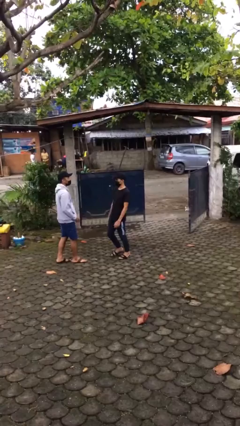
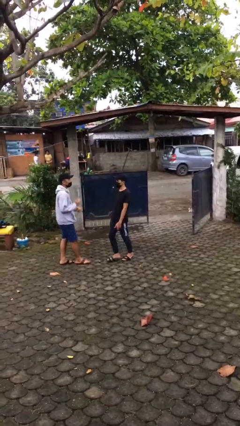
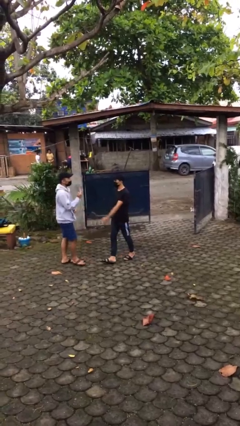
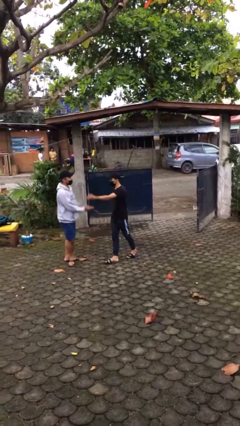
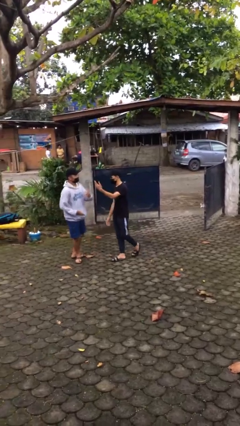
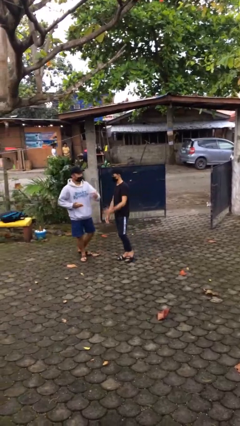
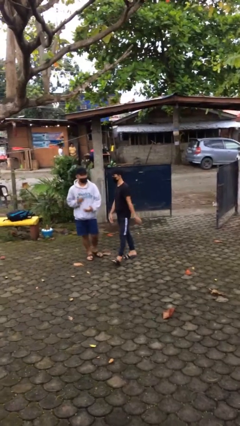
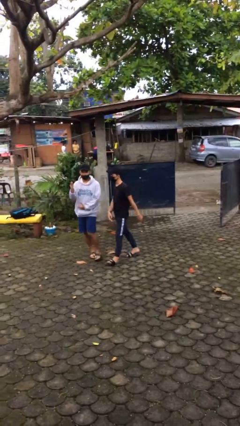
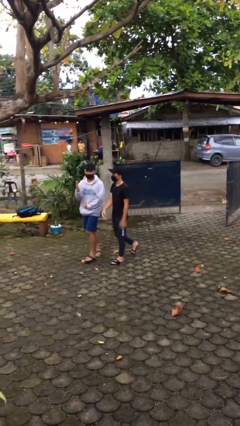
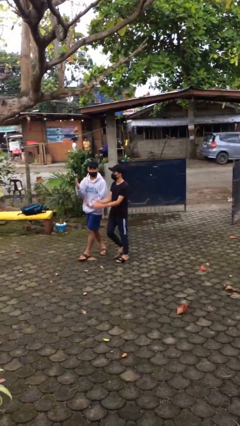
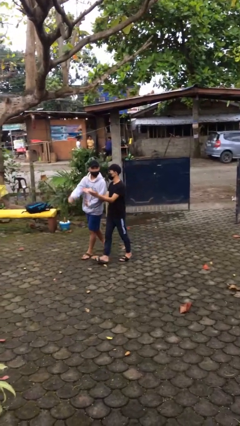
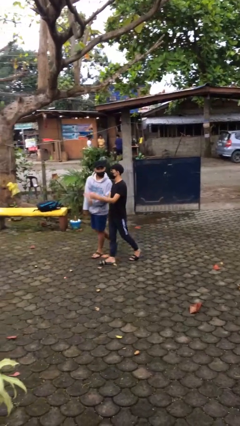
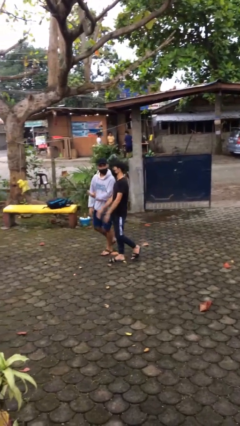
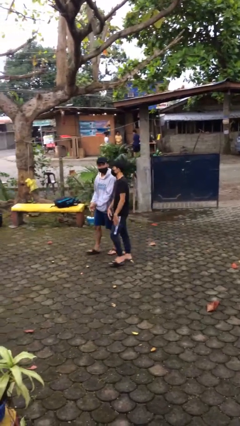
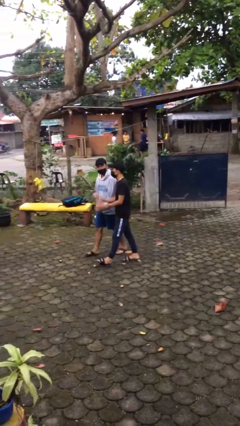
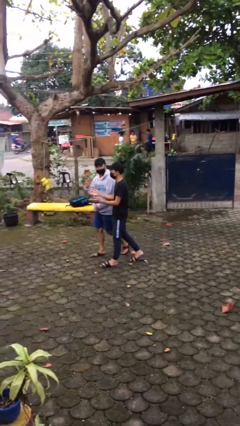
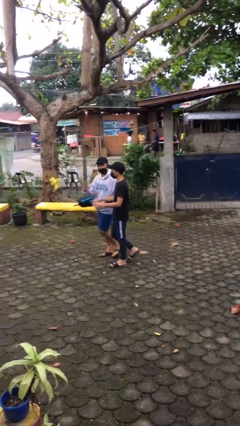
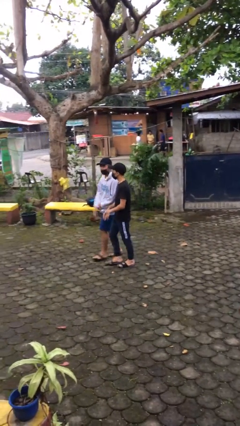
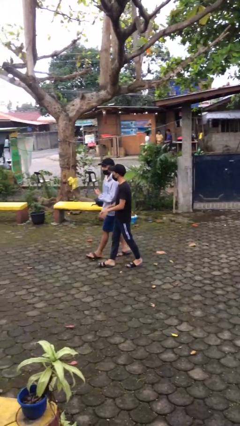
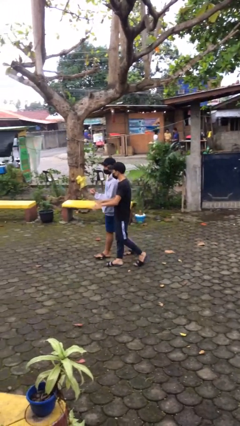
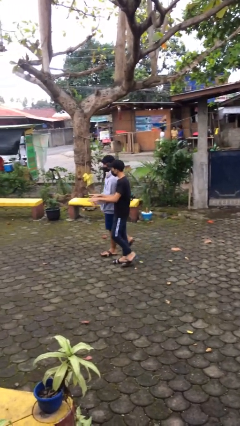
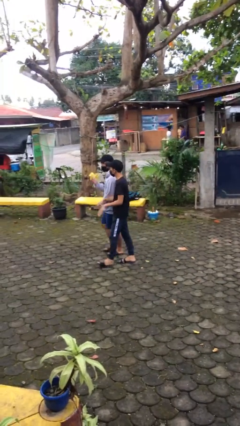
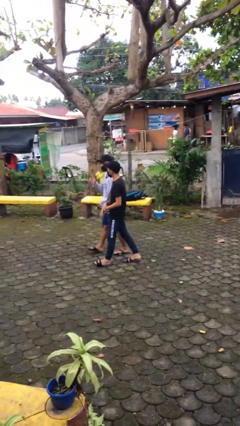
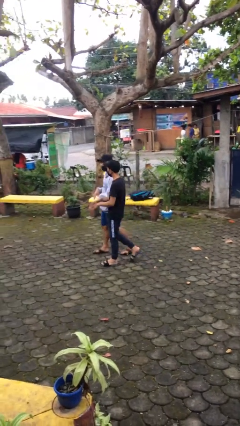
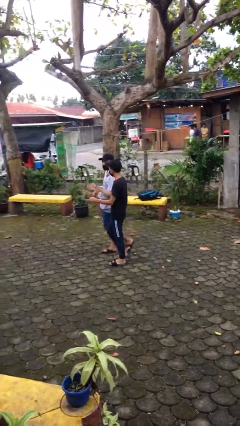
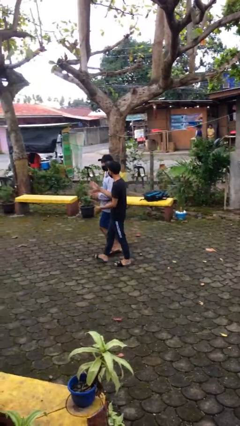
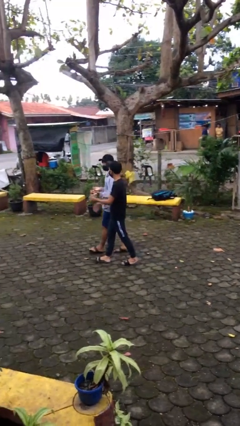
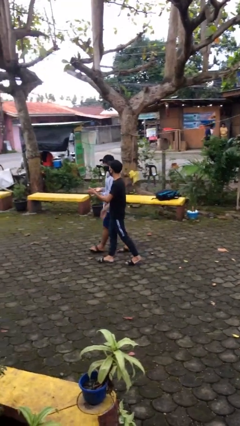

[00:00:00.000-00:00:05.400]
person talks to person

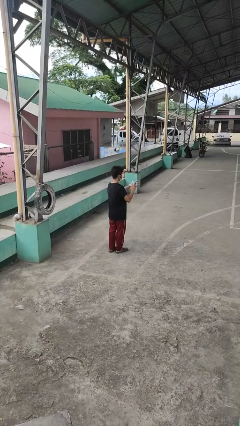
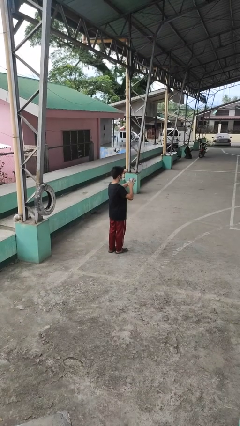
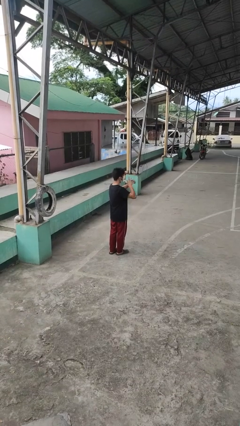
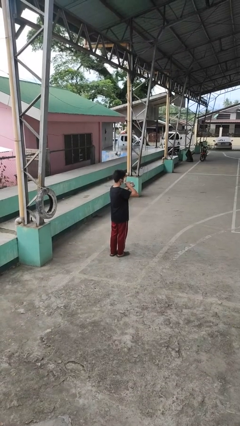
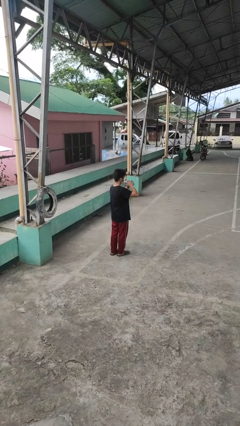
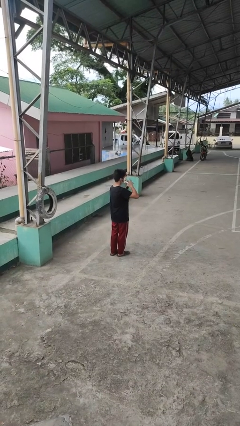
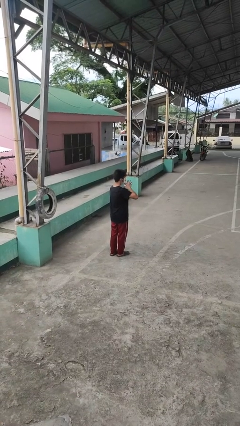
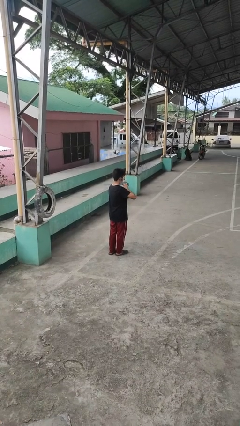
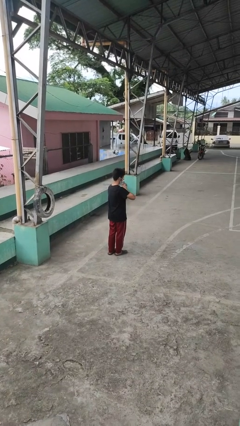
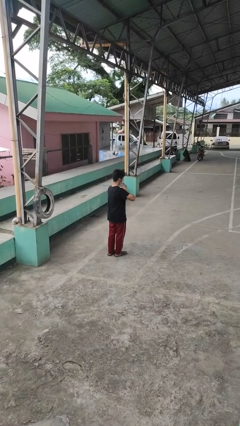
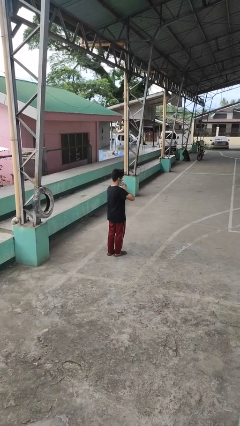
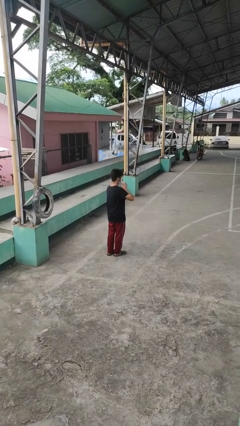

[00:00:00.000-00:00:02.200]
person squeezes object

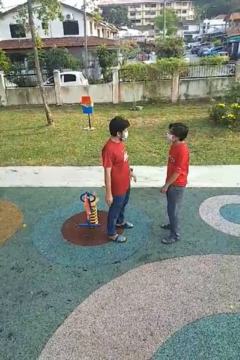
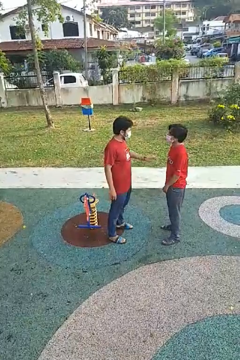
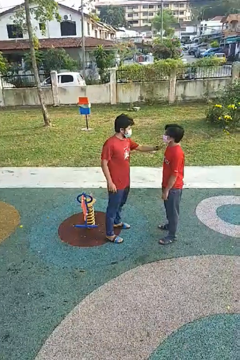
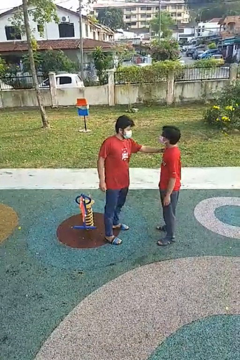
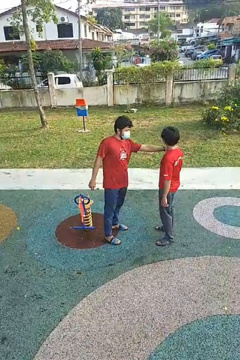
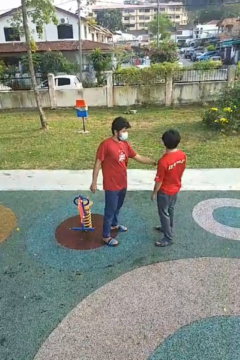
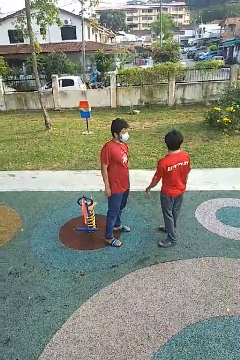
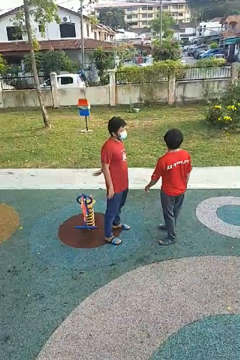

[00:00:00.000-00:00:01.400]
person shoves person

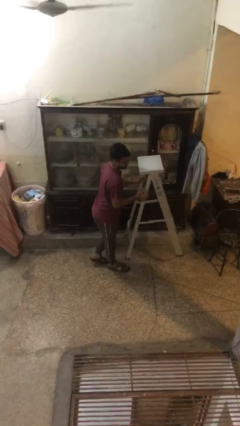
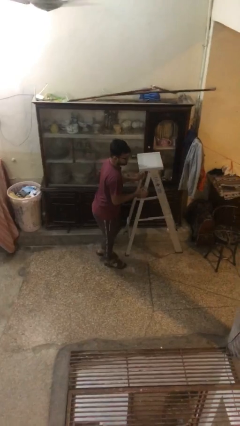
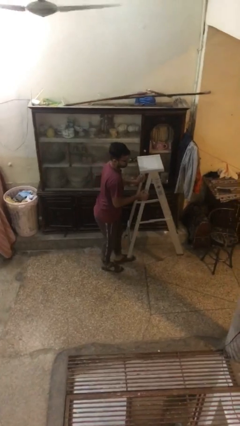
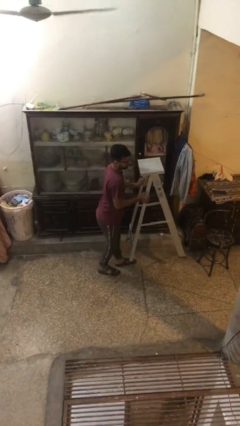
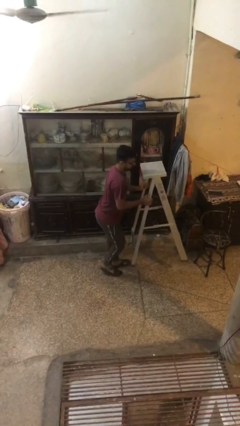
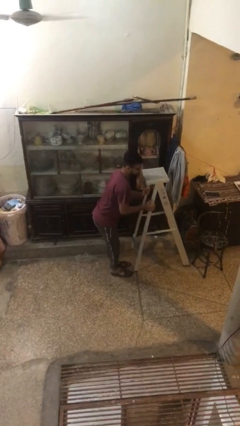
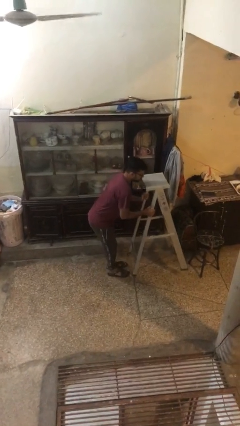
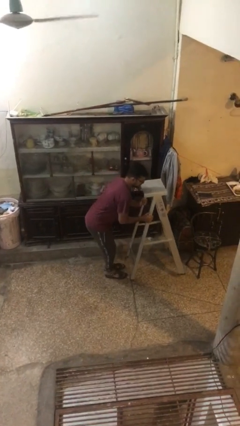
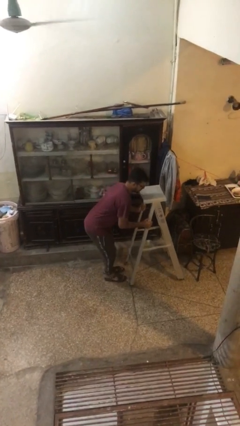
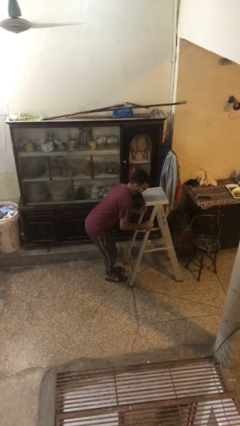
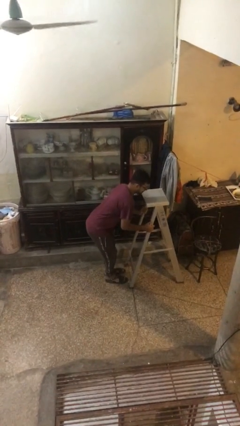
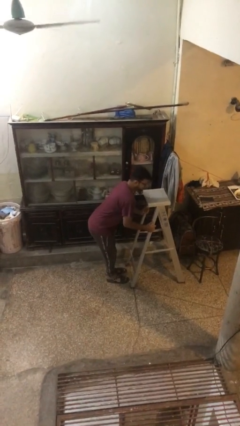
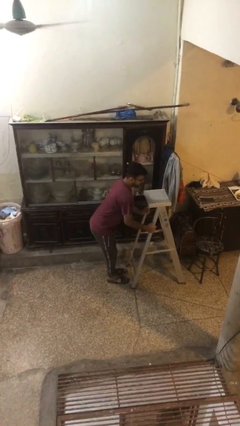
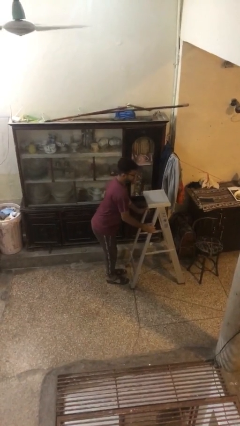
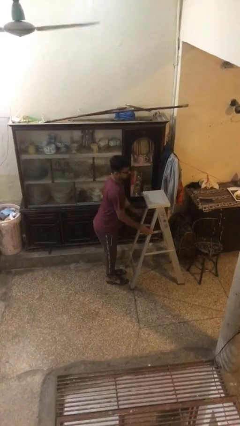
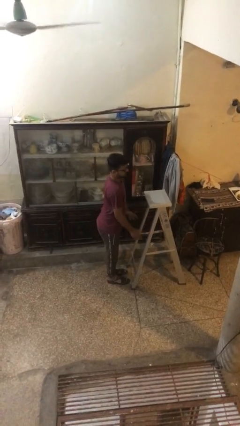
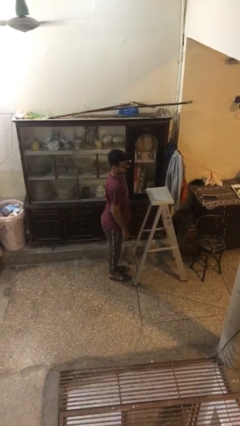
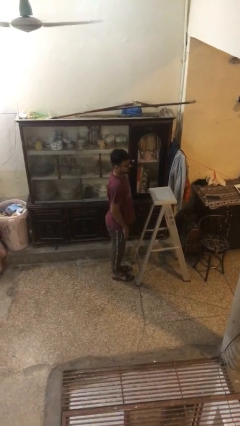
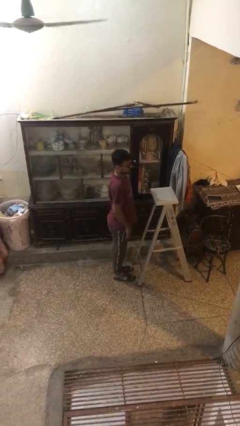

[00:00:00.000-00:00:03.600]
person puts down object on floor

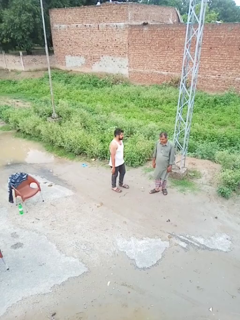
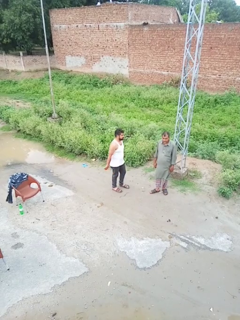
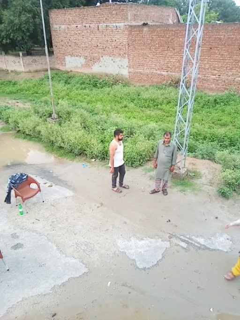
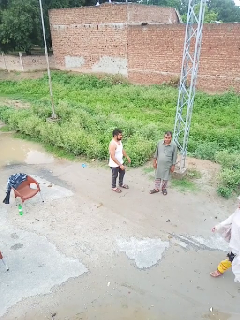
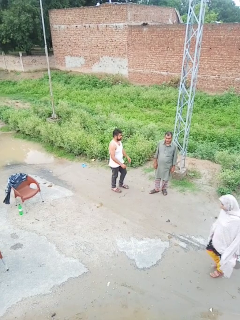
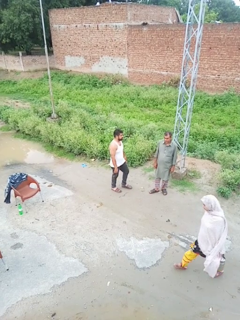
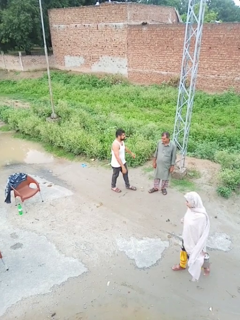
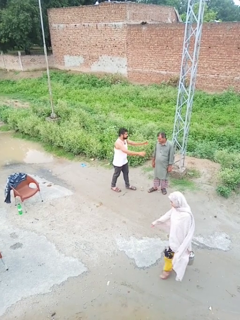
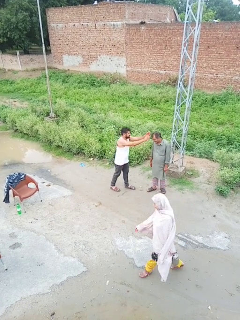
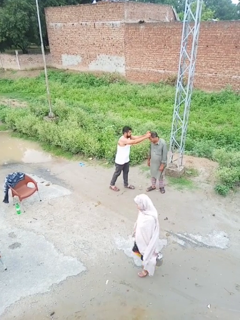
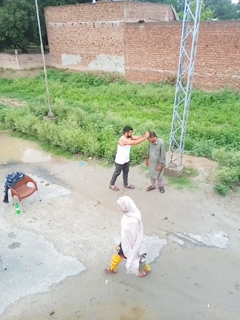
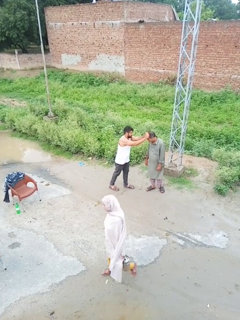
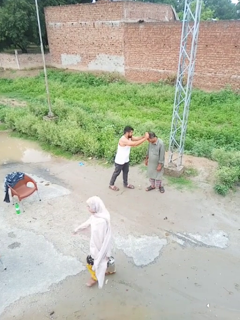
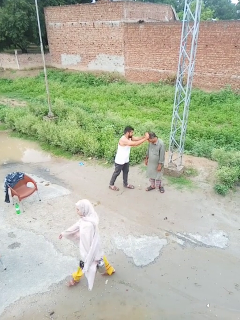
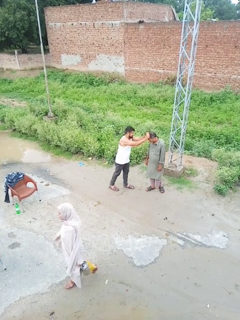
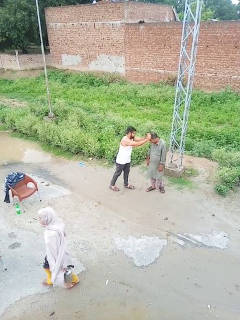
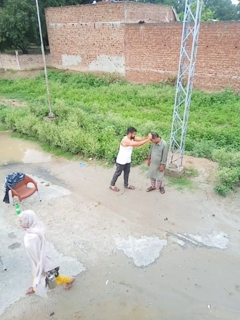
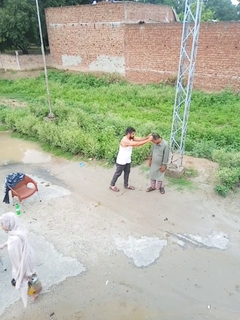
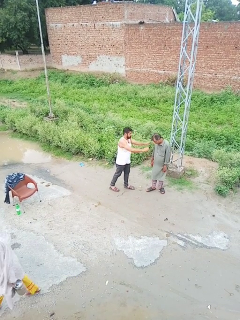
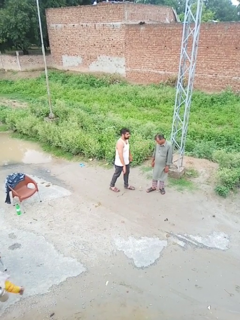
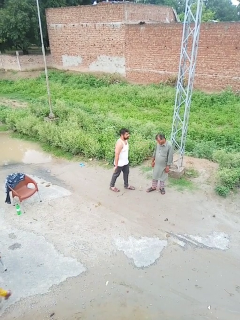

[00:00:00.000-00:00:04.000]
person grabs person by hair

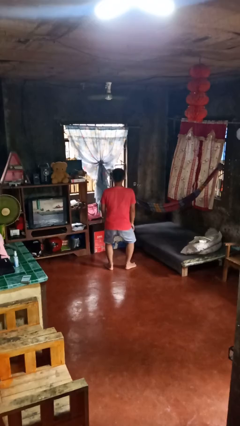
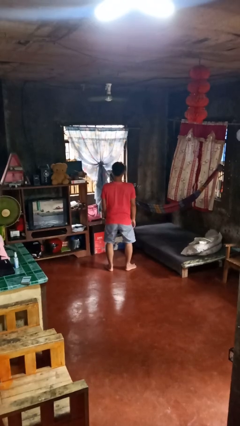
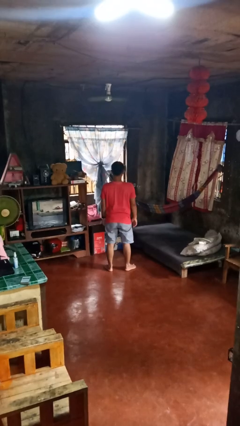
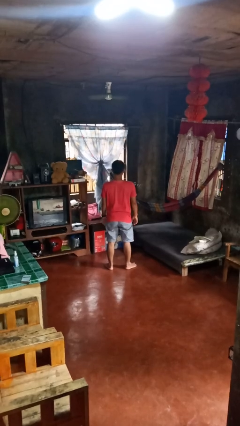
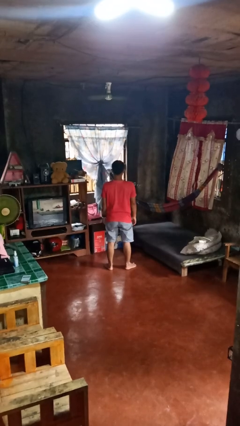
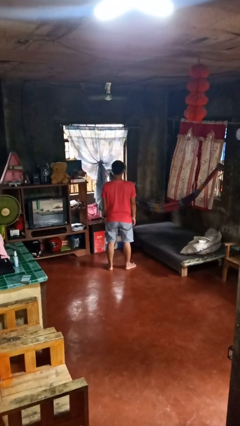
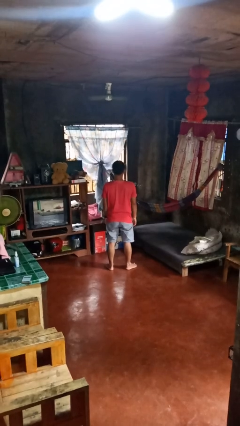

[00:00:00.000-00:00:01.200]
person stands up

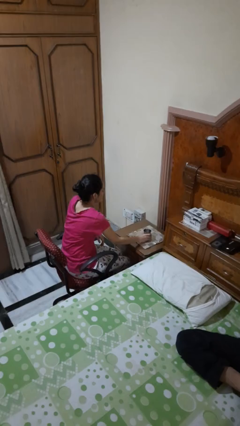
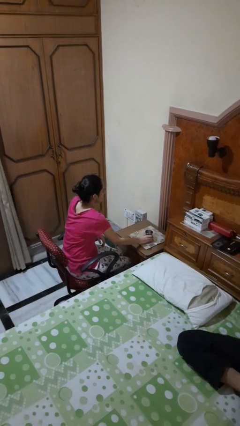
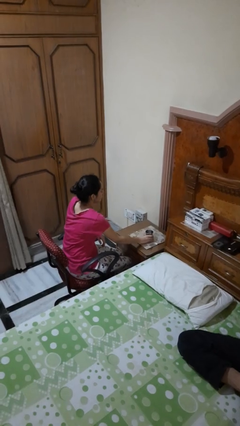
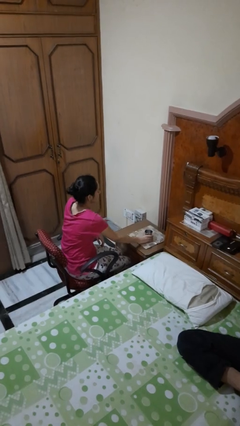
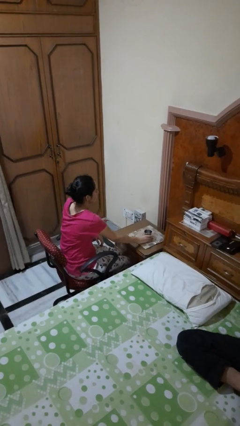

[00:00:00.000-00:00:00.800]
person sets upright glass
